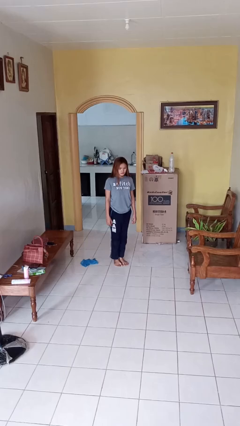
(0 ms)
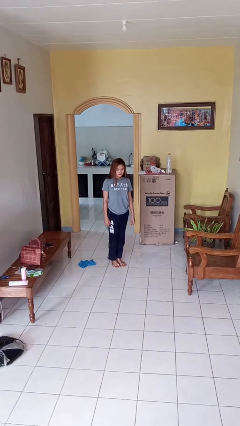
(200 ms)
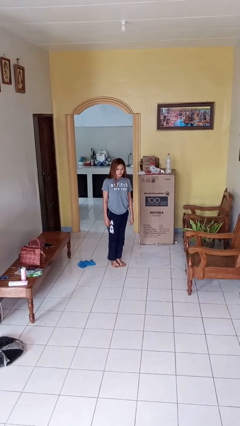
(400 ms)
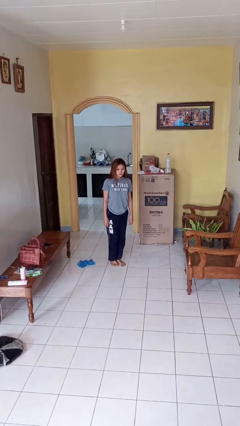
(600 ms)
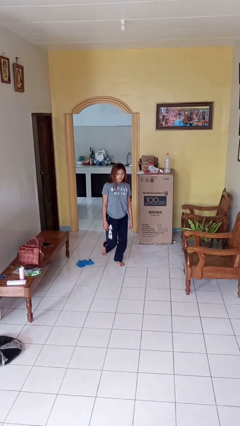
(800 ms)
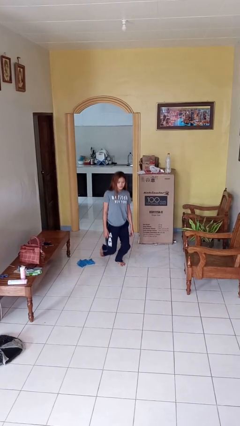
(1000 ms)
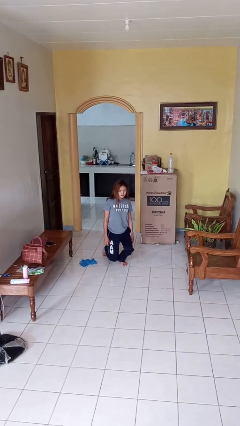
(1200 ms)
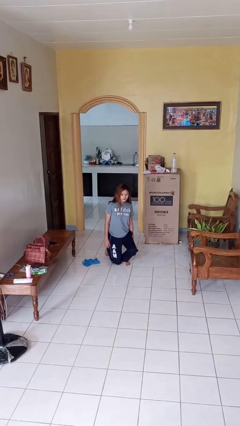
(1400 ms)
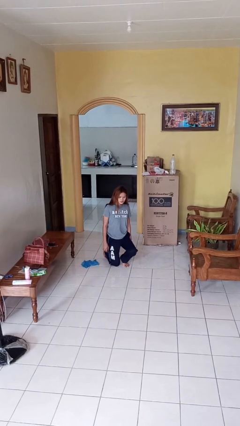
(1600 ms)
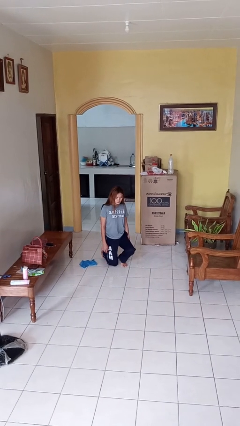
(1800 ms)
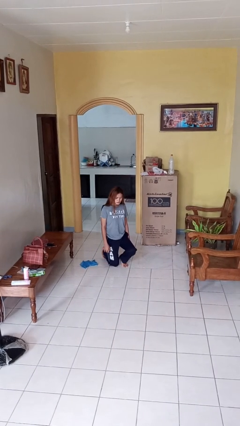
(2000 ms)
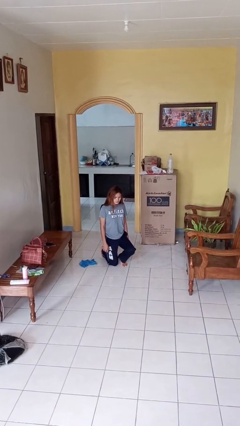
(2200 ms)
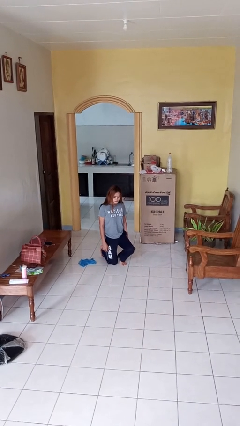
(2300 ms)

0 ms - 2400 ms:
person kneels

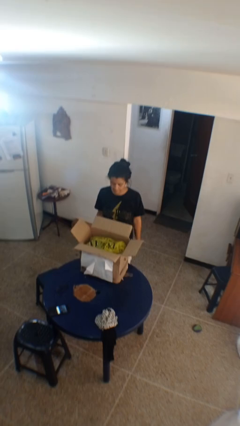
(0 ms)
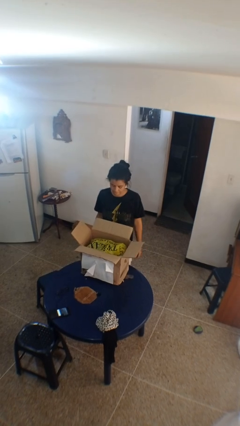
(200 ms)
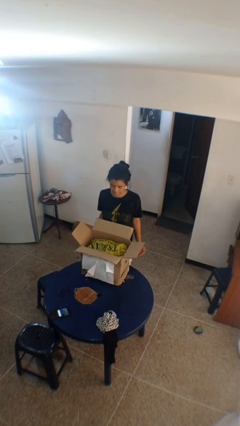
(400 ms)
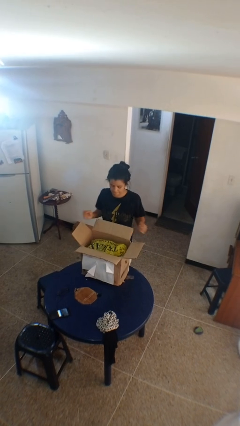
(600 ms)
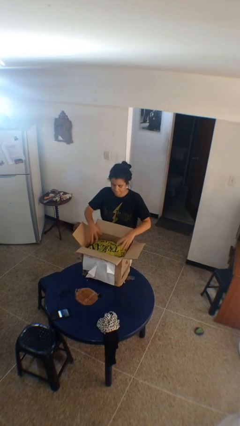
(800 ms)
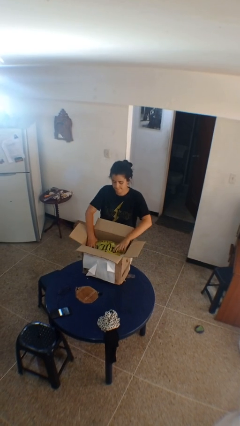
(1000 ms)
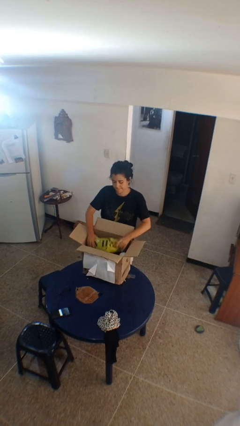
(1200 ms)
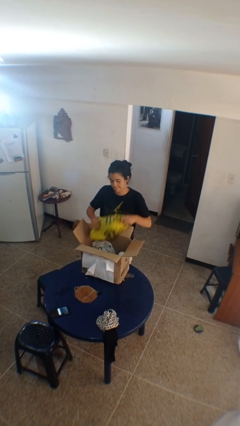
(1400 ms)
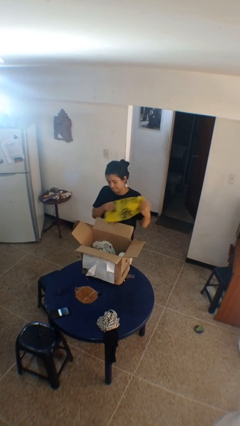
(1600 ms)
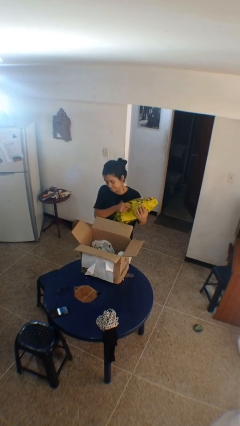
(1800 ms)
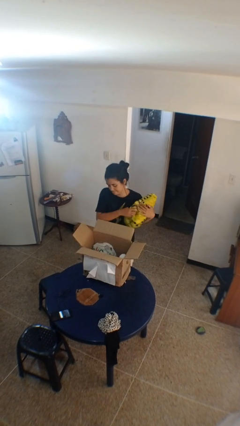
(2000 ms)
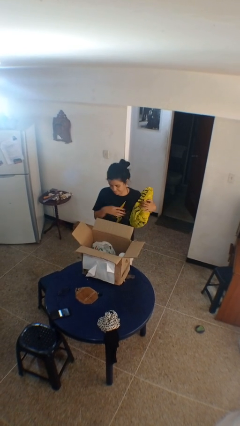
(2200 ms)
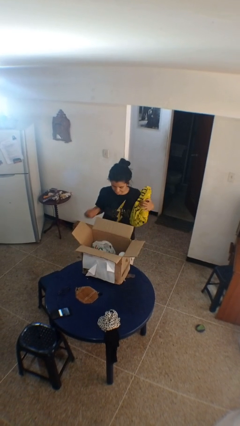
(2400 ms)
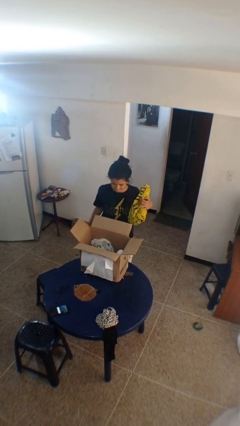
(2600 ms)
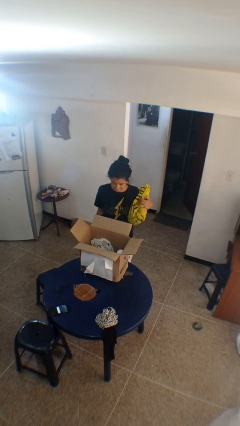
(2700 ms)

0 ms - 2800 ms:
person takes object from box

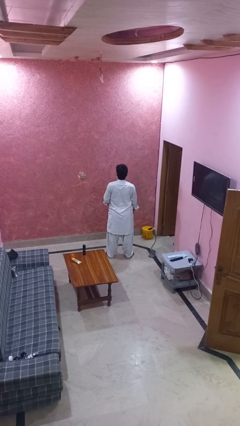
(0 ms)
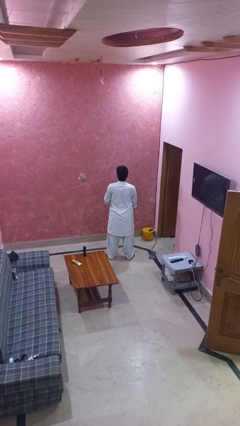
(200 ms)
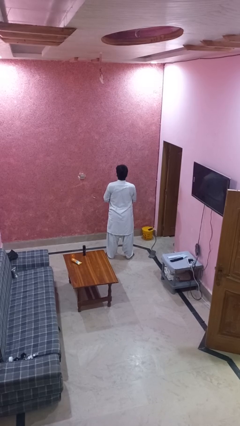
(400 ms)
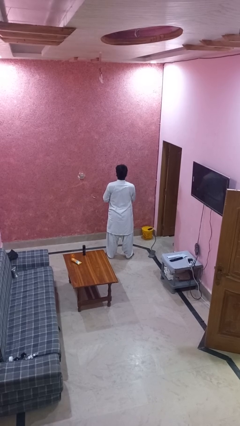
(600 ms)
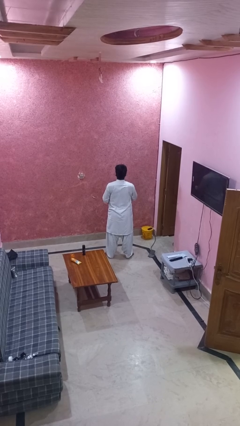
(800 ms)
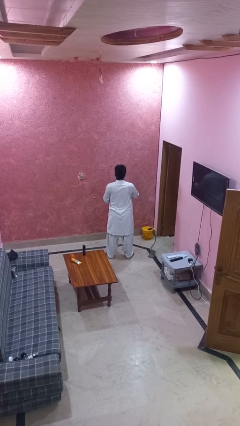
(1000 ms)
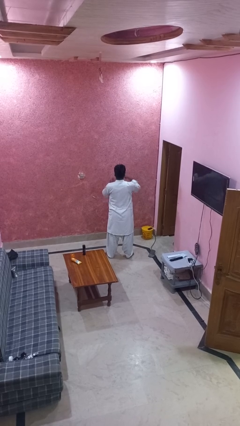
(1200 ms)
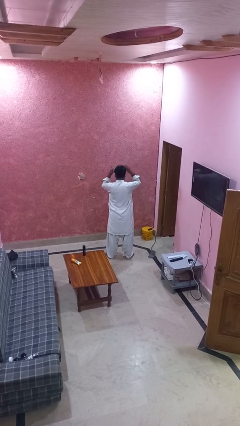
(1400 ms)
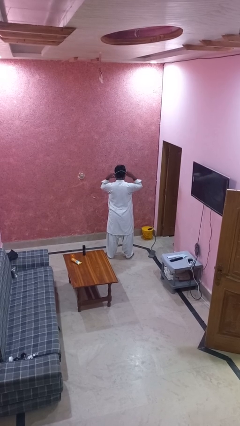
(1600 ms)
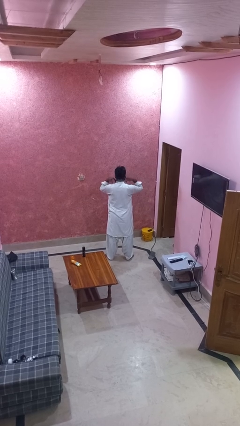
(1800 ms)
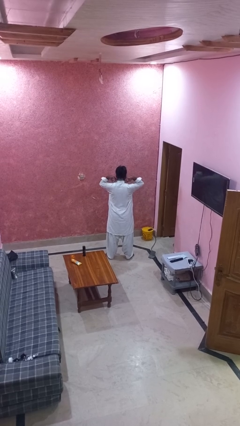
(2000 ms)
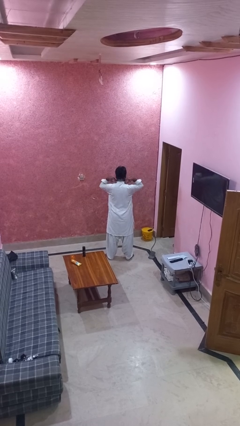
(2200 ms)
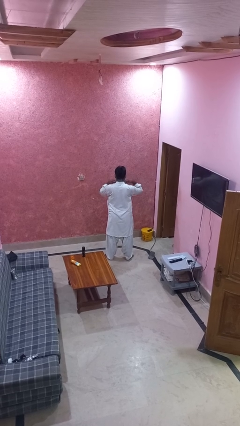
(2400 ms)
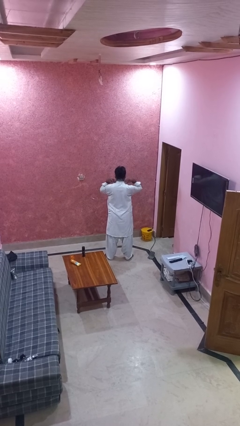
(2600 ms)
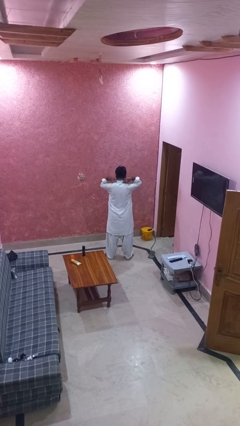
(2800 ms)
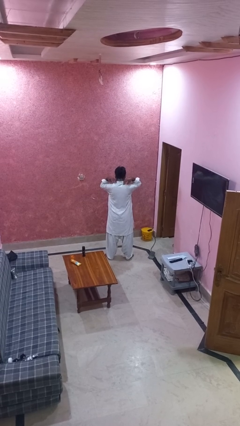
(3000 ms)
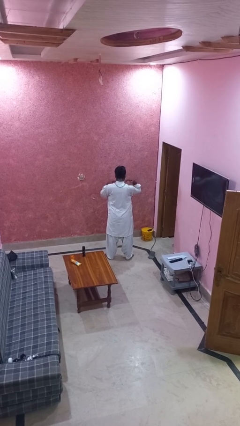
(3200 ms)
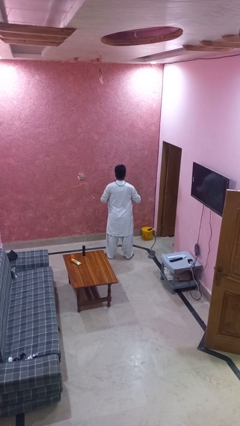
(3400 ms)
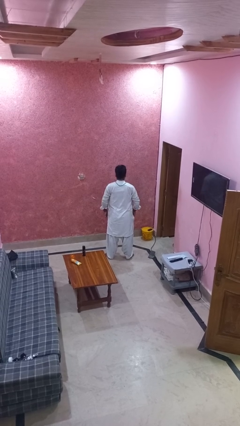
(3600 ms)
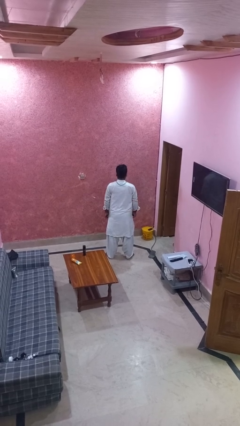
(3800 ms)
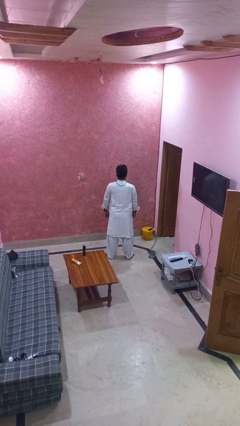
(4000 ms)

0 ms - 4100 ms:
person puts on necklace

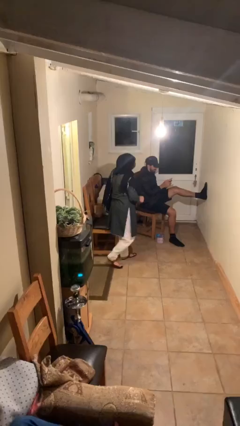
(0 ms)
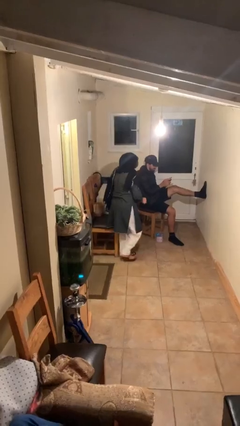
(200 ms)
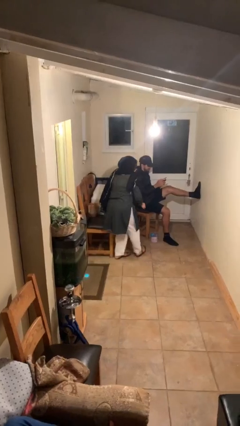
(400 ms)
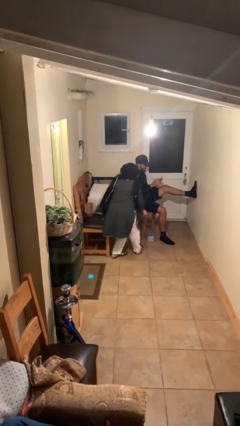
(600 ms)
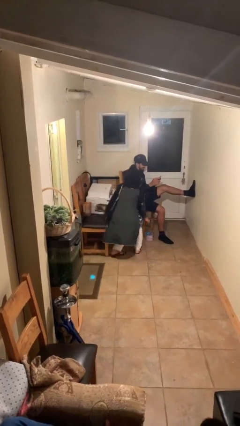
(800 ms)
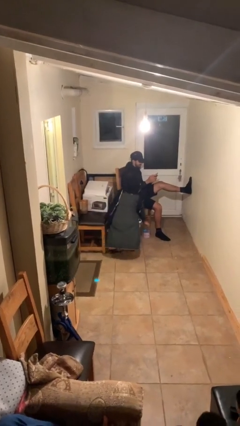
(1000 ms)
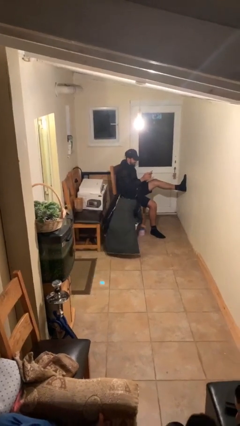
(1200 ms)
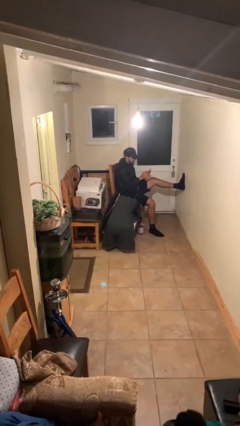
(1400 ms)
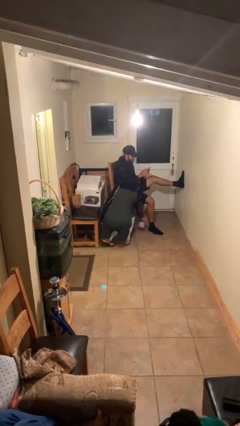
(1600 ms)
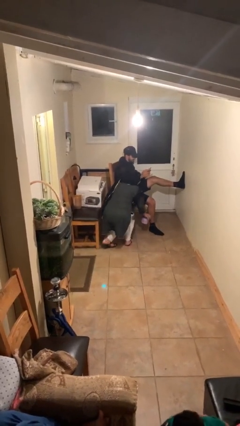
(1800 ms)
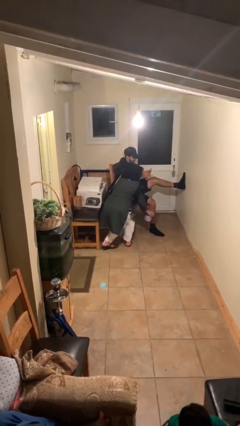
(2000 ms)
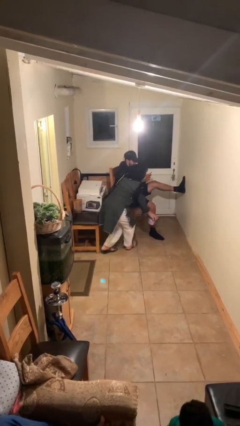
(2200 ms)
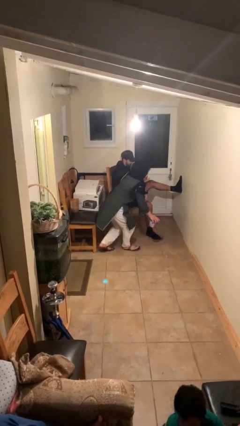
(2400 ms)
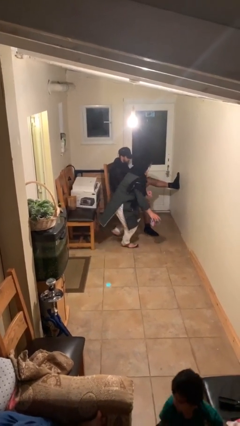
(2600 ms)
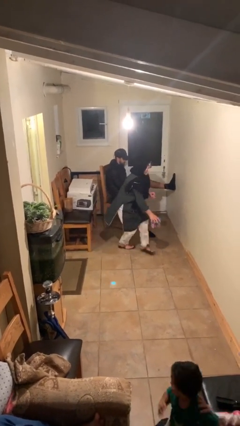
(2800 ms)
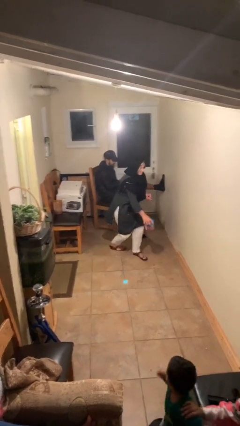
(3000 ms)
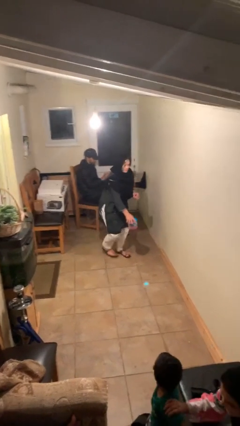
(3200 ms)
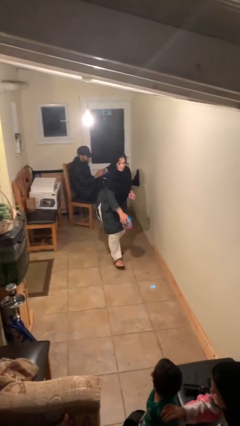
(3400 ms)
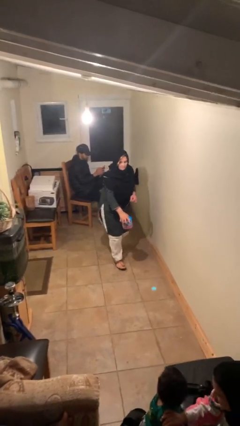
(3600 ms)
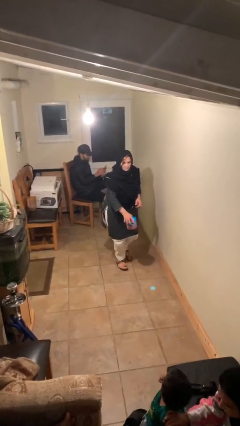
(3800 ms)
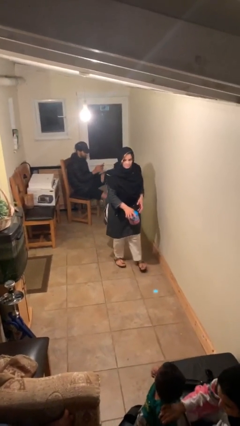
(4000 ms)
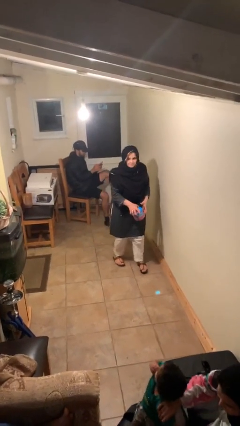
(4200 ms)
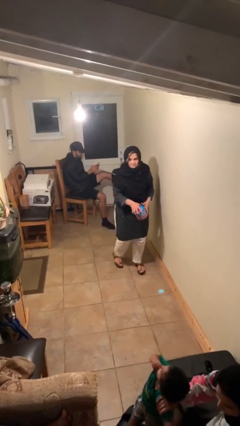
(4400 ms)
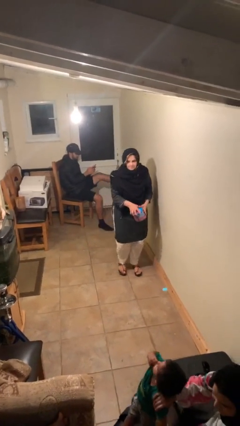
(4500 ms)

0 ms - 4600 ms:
person steals object from person

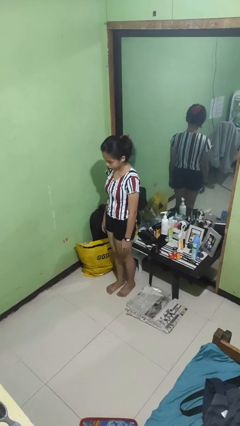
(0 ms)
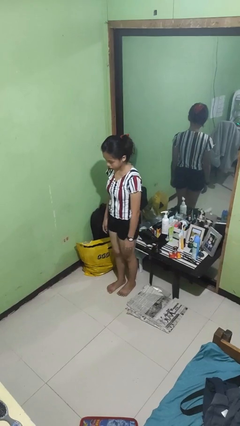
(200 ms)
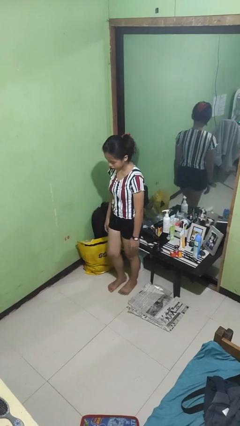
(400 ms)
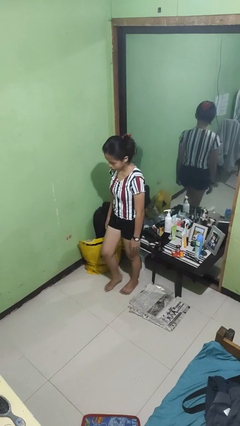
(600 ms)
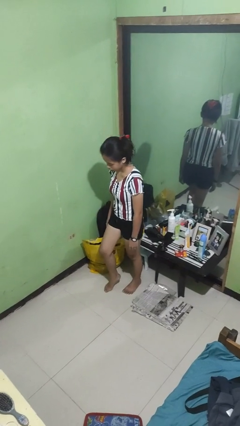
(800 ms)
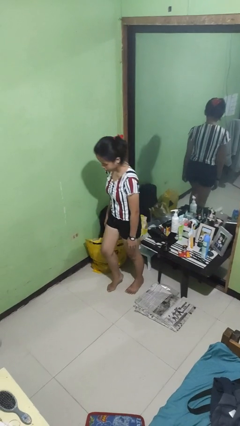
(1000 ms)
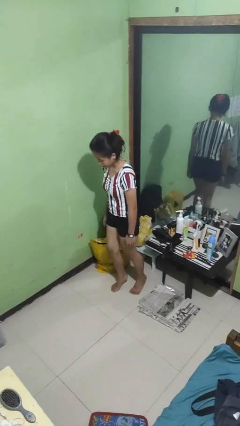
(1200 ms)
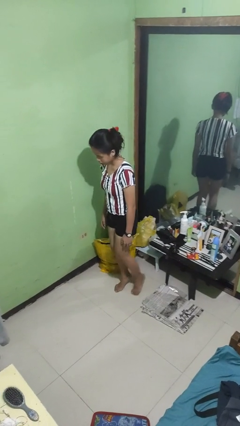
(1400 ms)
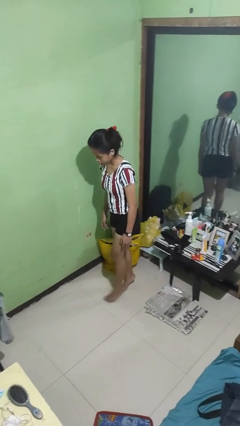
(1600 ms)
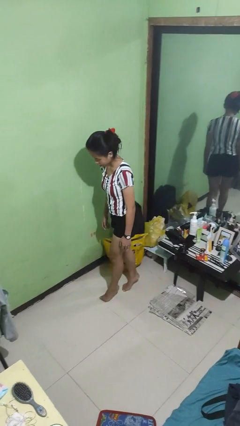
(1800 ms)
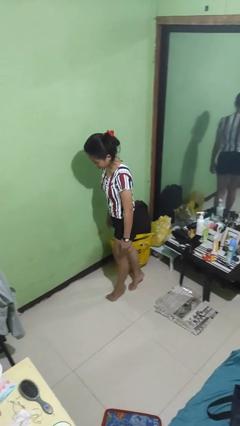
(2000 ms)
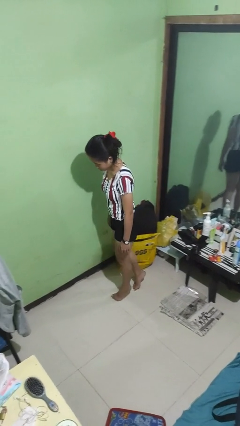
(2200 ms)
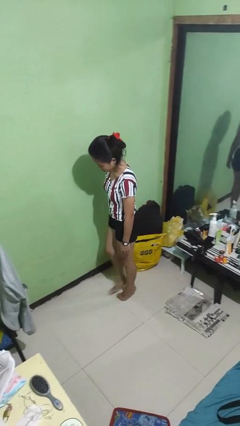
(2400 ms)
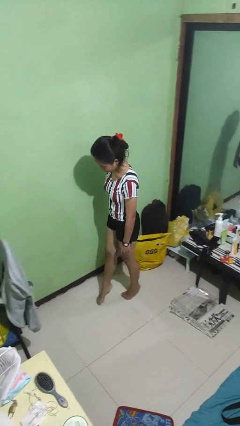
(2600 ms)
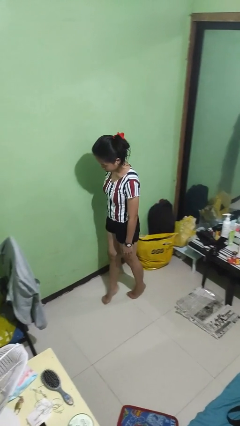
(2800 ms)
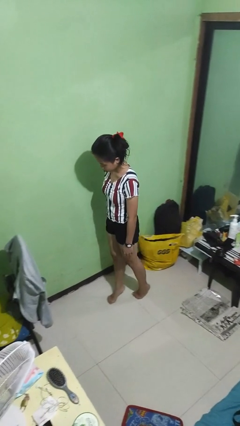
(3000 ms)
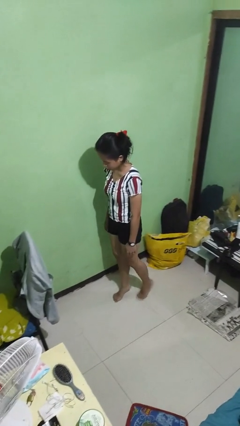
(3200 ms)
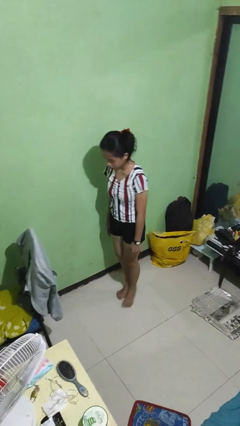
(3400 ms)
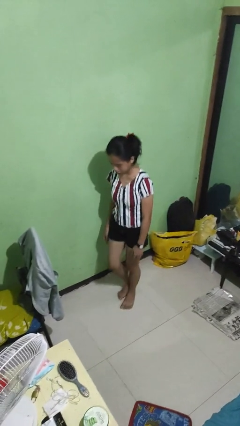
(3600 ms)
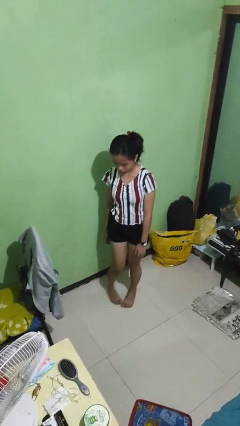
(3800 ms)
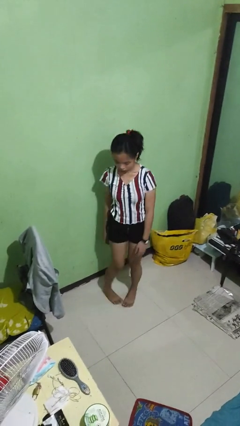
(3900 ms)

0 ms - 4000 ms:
person walks tiptoe
